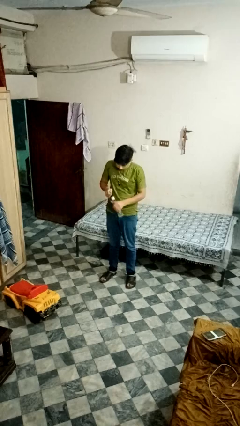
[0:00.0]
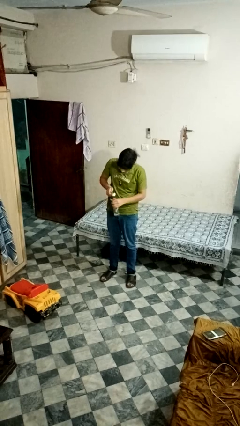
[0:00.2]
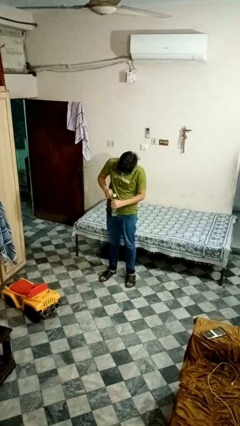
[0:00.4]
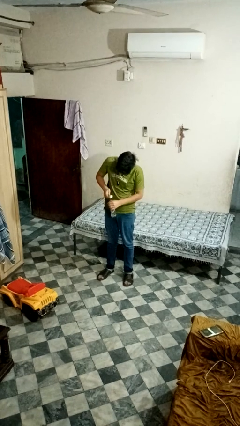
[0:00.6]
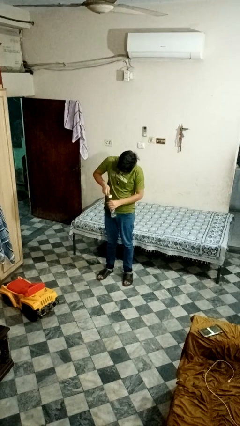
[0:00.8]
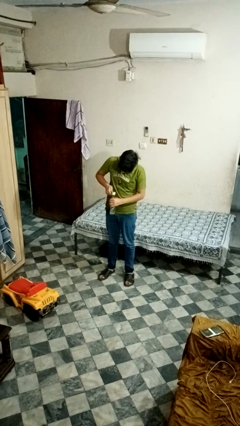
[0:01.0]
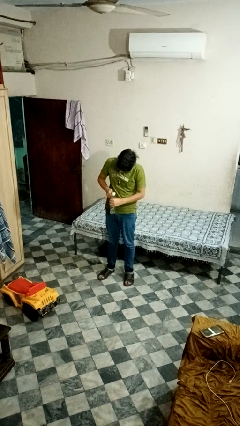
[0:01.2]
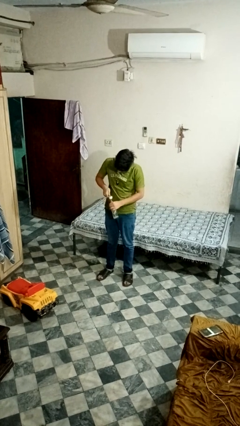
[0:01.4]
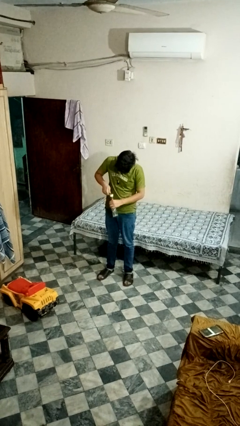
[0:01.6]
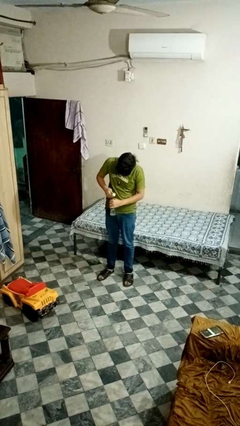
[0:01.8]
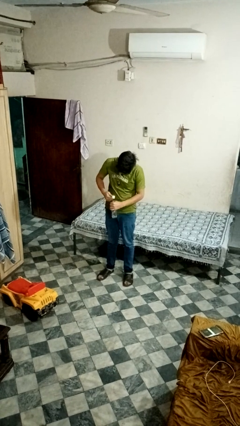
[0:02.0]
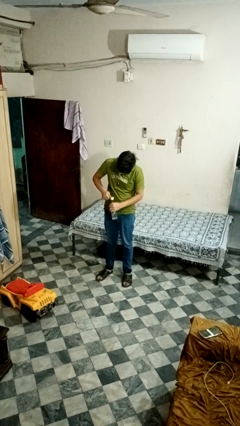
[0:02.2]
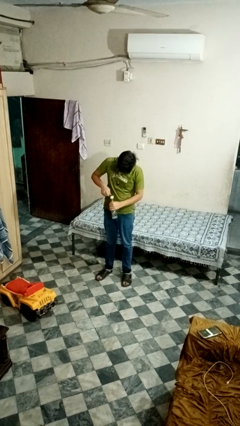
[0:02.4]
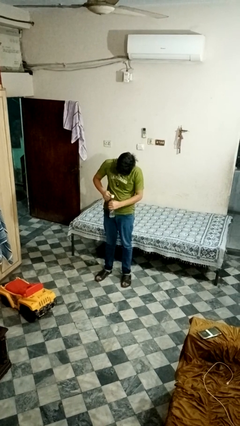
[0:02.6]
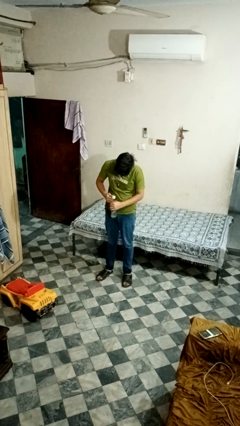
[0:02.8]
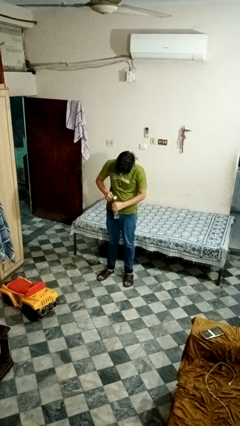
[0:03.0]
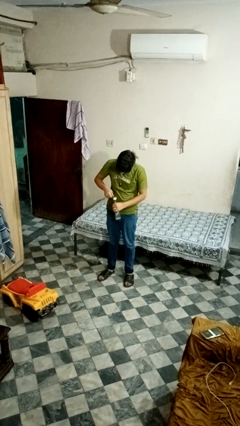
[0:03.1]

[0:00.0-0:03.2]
person opens can with can opener

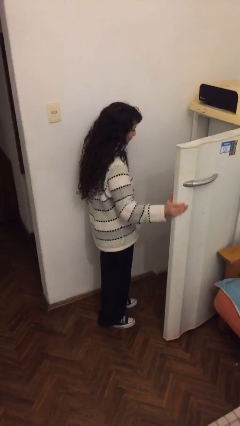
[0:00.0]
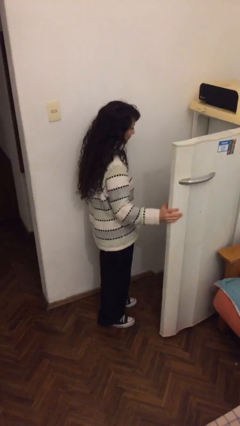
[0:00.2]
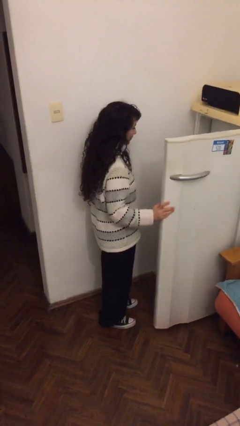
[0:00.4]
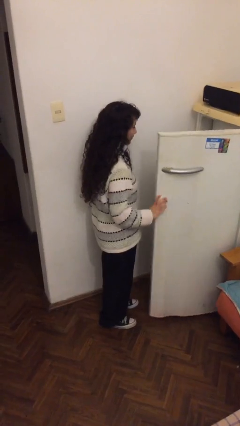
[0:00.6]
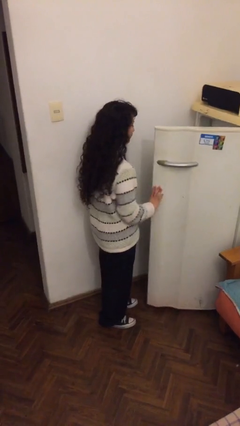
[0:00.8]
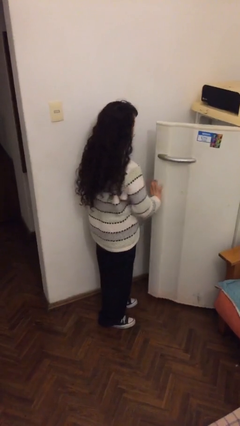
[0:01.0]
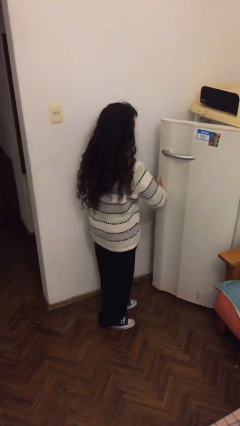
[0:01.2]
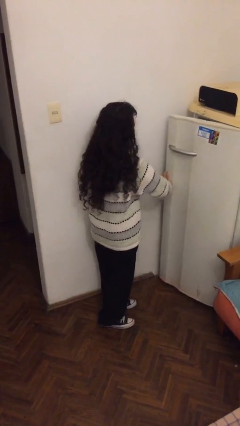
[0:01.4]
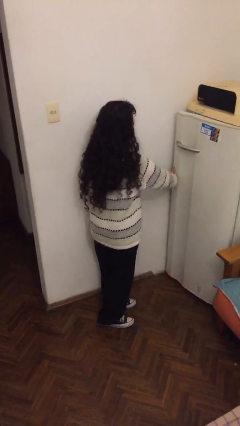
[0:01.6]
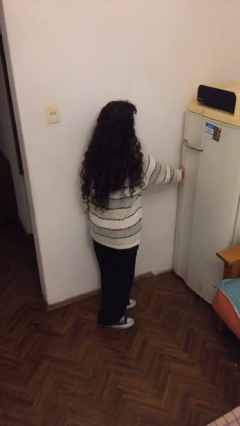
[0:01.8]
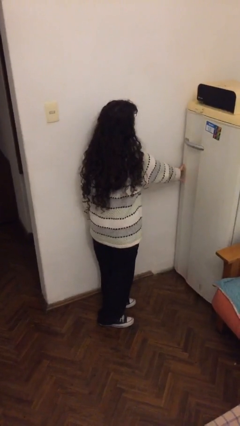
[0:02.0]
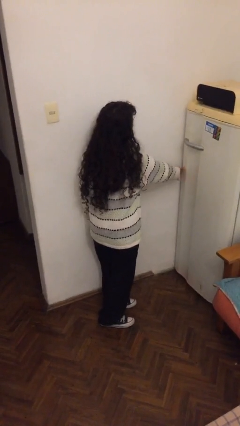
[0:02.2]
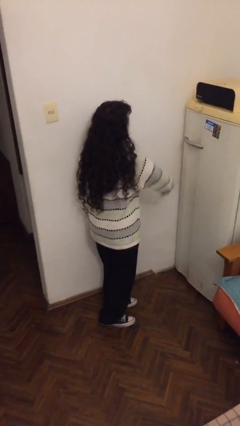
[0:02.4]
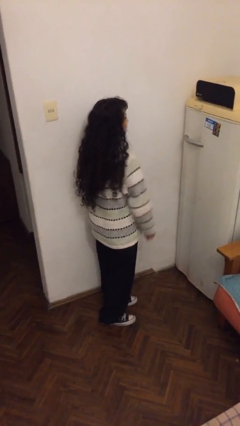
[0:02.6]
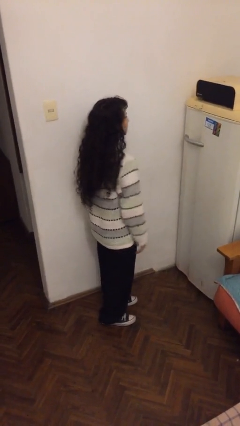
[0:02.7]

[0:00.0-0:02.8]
person closes refrigerator

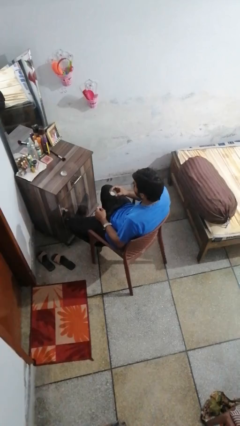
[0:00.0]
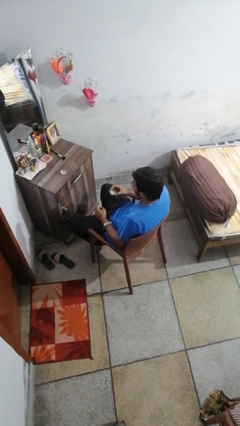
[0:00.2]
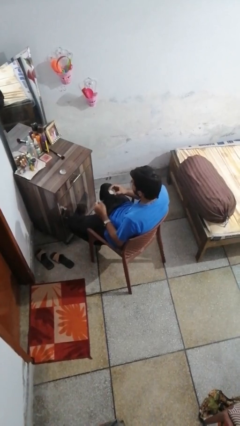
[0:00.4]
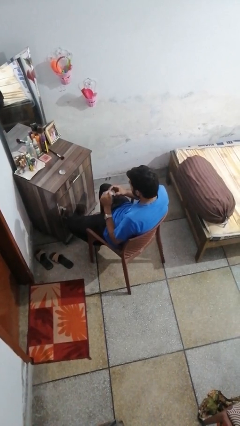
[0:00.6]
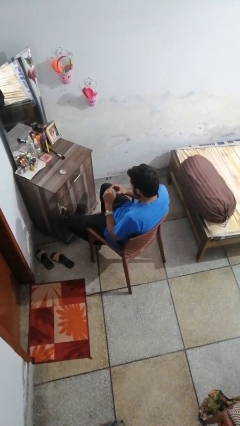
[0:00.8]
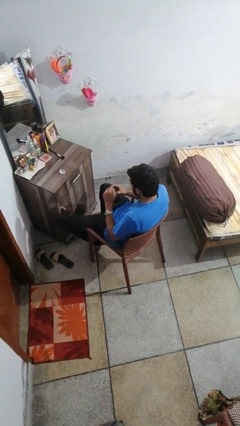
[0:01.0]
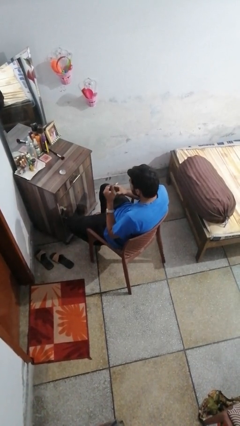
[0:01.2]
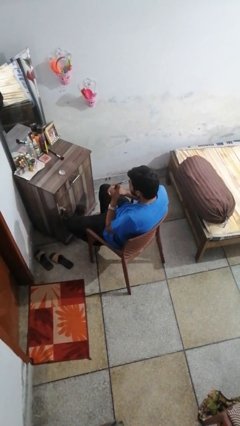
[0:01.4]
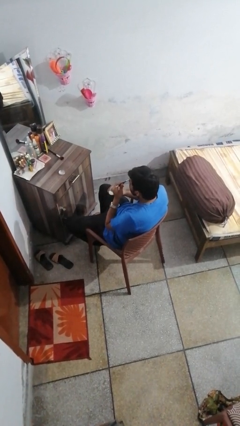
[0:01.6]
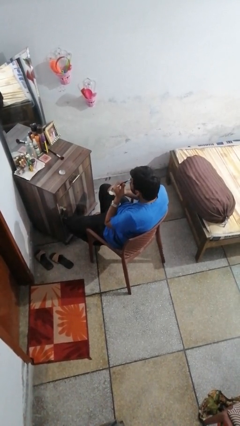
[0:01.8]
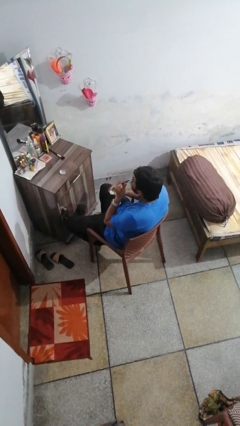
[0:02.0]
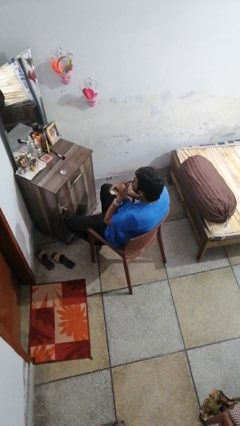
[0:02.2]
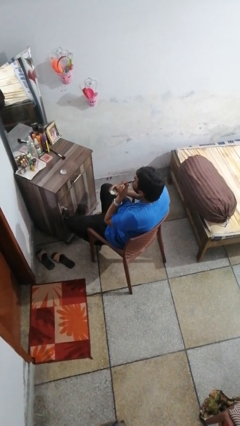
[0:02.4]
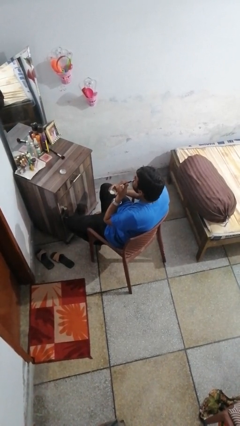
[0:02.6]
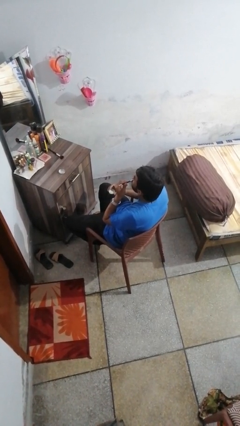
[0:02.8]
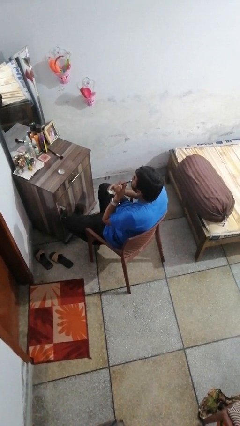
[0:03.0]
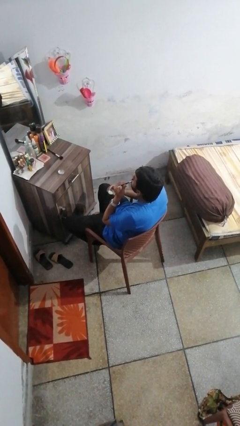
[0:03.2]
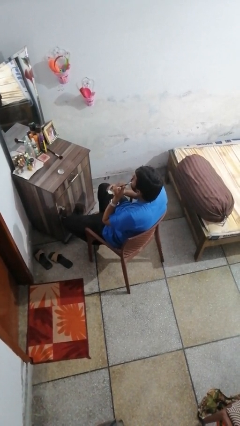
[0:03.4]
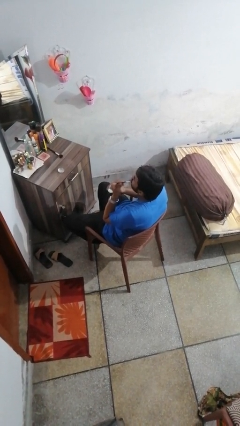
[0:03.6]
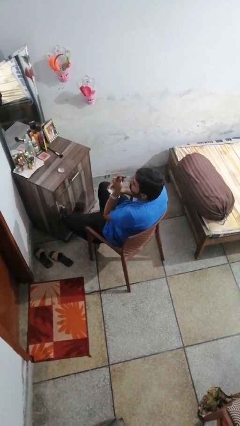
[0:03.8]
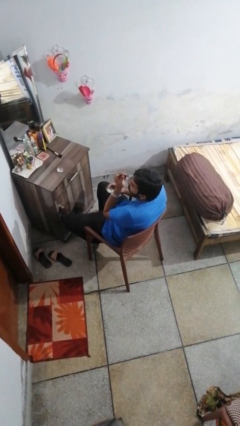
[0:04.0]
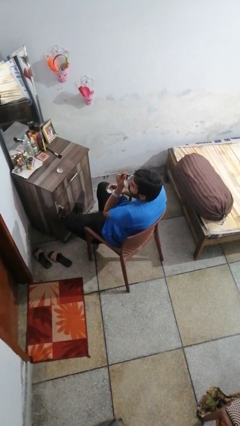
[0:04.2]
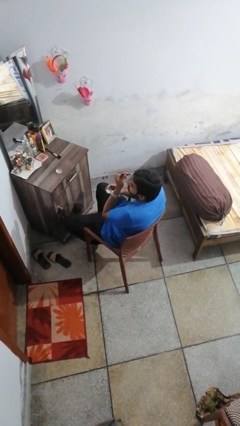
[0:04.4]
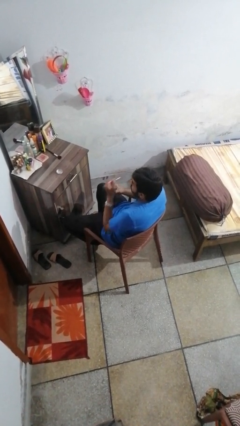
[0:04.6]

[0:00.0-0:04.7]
person applies eye makeup

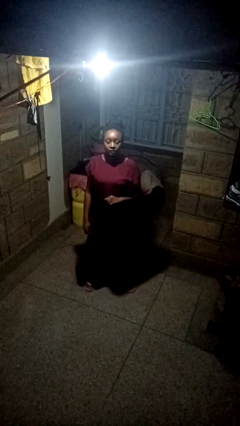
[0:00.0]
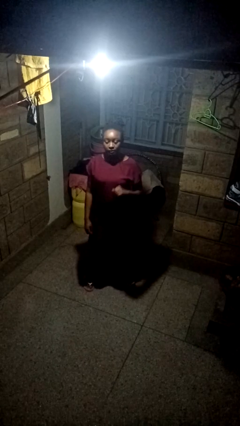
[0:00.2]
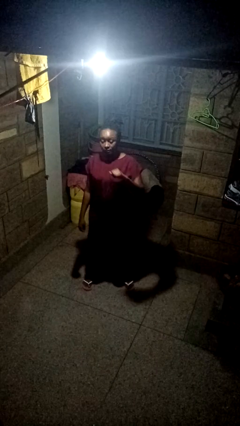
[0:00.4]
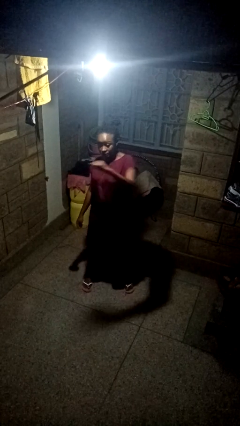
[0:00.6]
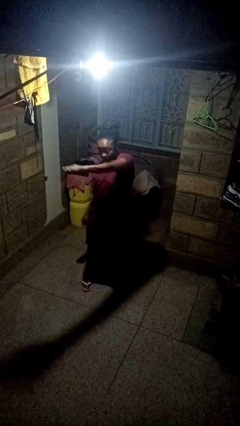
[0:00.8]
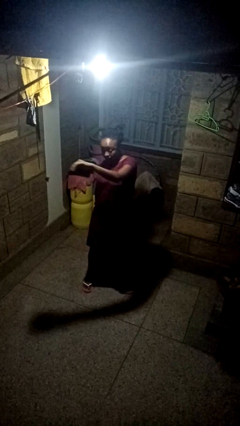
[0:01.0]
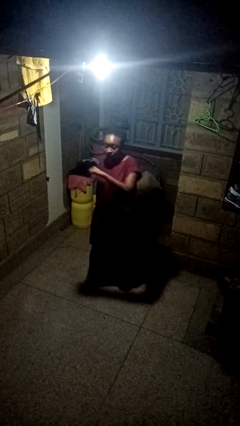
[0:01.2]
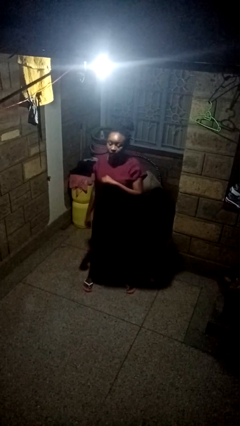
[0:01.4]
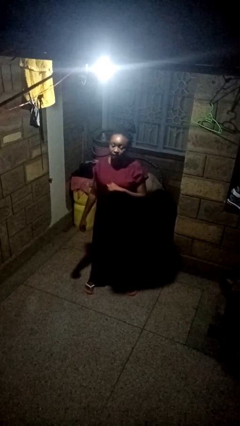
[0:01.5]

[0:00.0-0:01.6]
person karate chop

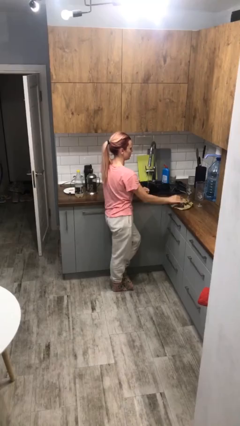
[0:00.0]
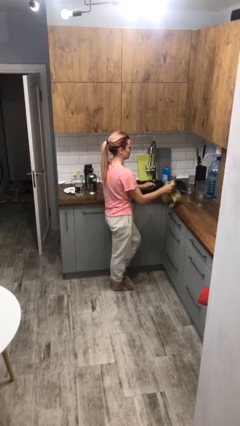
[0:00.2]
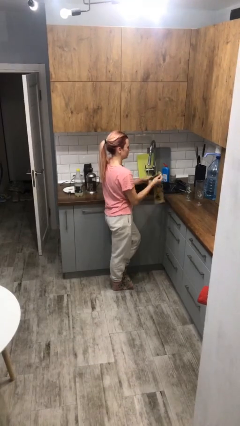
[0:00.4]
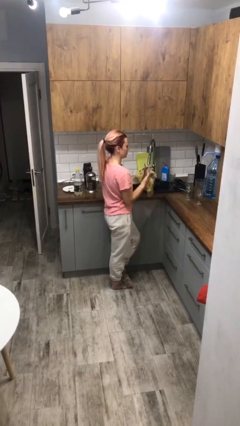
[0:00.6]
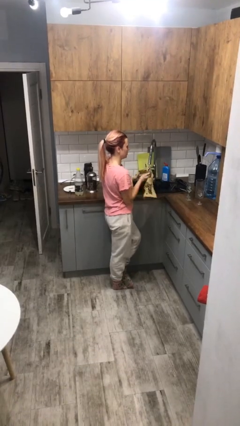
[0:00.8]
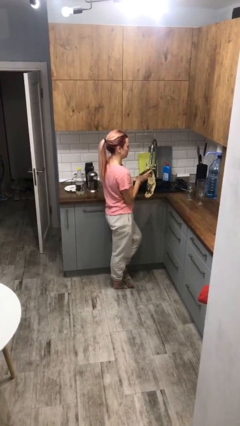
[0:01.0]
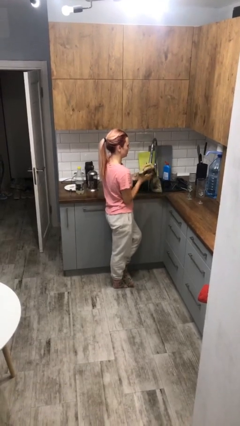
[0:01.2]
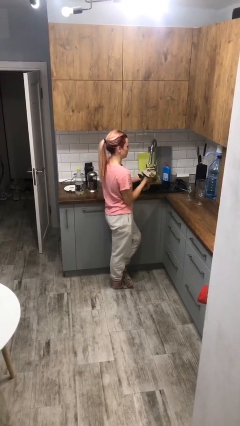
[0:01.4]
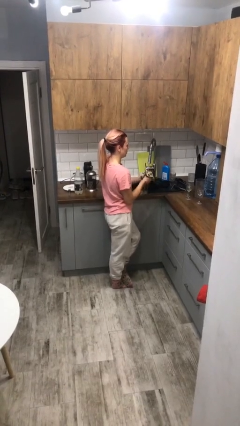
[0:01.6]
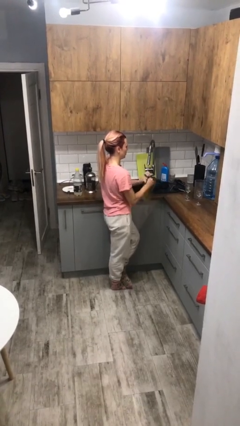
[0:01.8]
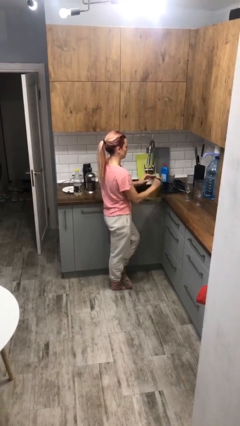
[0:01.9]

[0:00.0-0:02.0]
person dries hands with towel

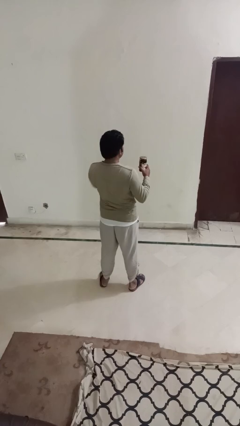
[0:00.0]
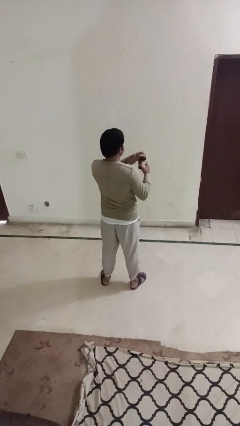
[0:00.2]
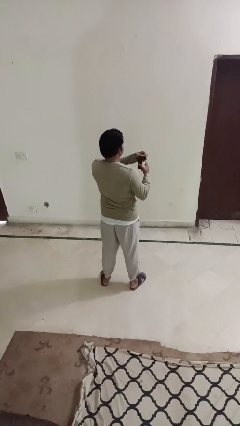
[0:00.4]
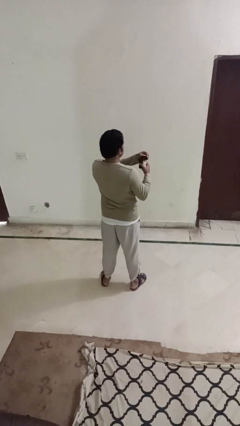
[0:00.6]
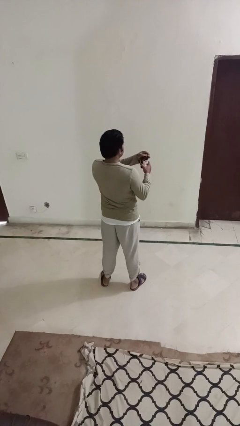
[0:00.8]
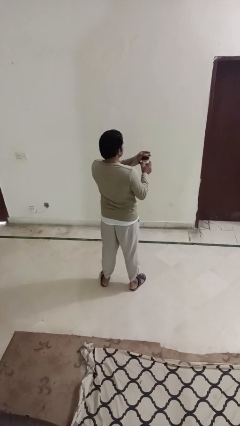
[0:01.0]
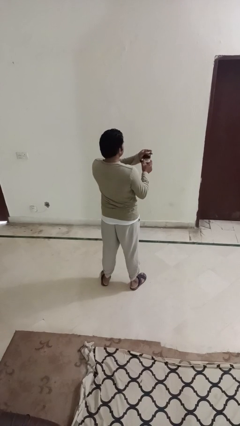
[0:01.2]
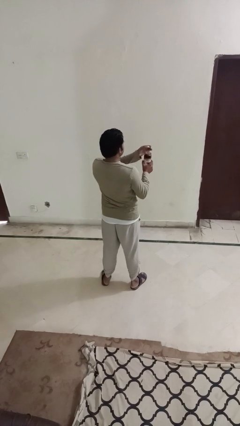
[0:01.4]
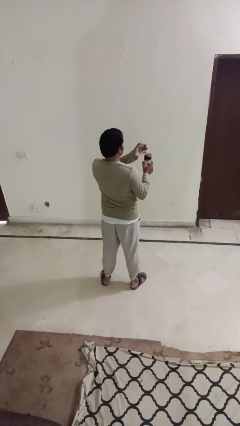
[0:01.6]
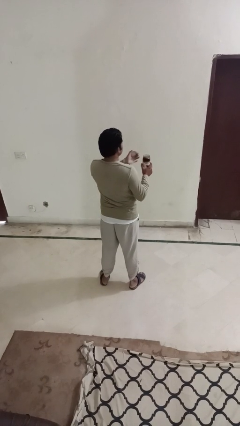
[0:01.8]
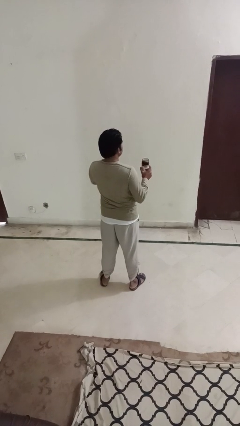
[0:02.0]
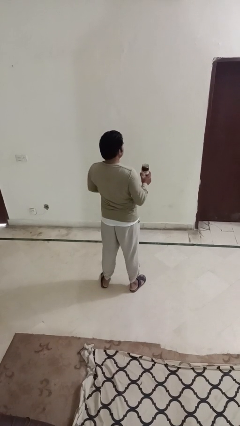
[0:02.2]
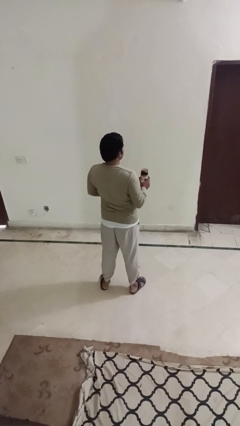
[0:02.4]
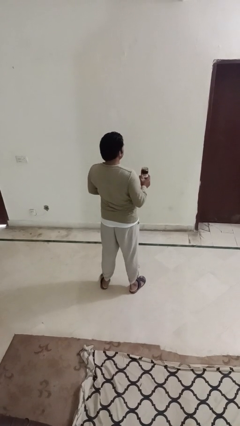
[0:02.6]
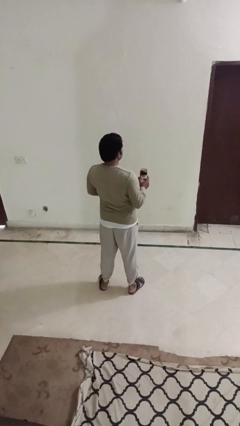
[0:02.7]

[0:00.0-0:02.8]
person opens jar

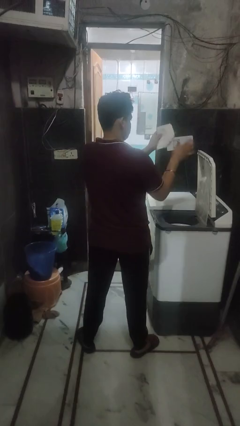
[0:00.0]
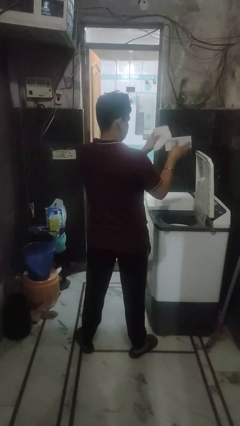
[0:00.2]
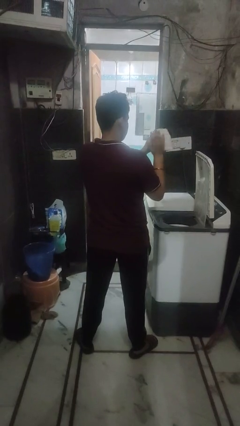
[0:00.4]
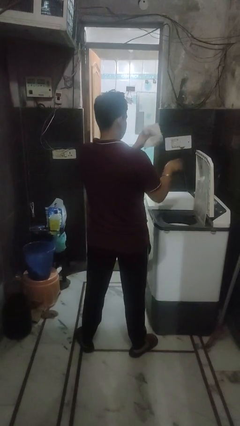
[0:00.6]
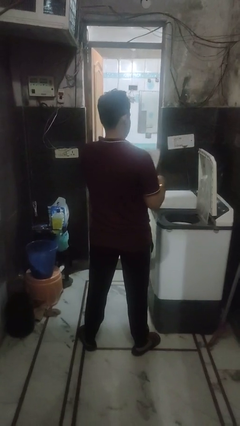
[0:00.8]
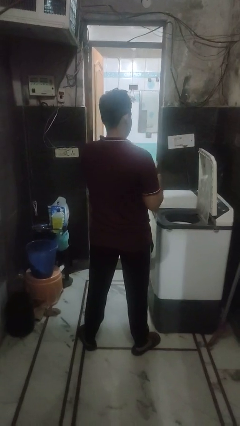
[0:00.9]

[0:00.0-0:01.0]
person cleans dryer lint trap
